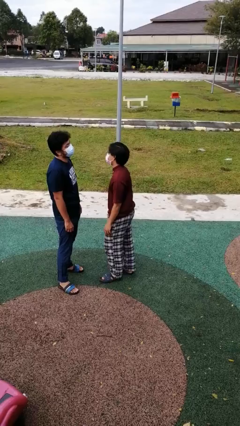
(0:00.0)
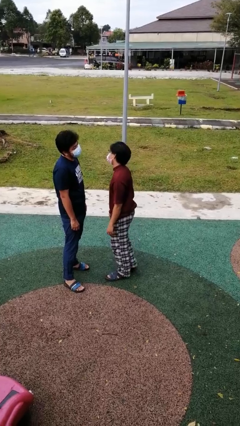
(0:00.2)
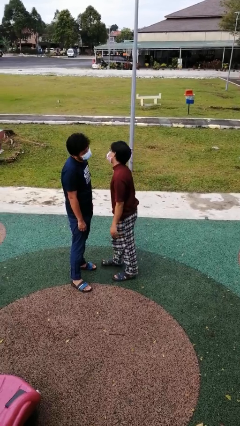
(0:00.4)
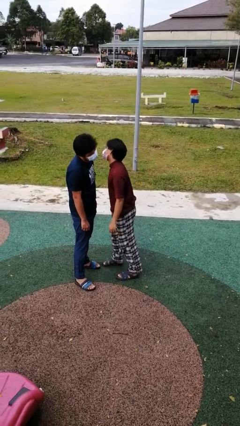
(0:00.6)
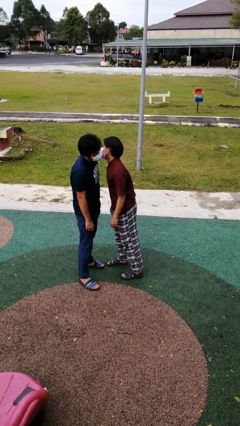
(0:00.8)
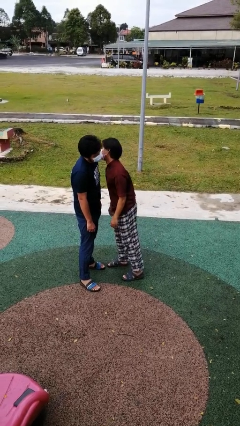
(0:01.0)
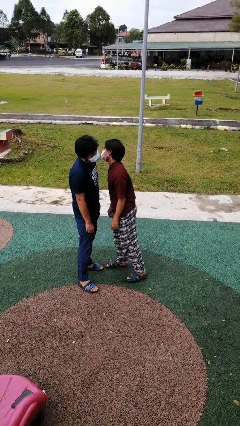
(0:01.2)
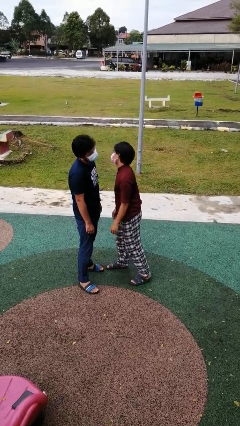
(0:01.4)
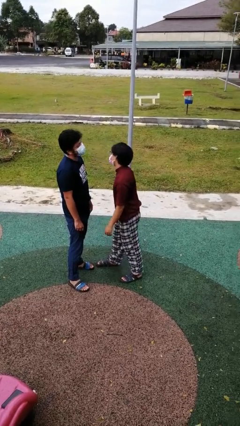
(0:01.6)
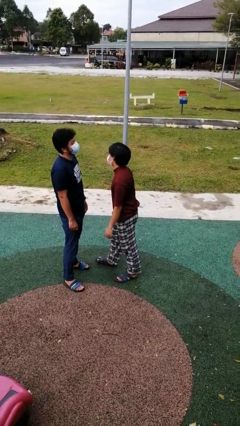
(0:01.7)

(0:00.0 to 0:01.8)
person kisses cheek of person

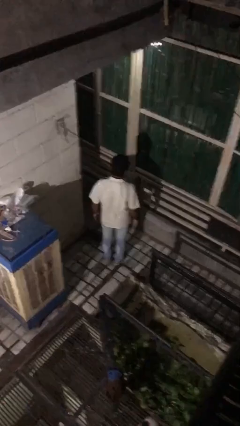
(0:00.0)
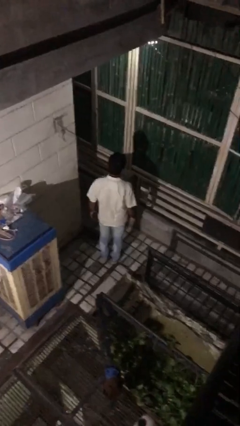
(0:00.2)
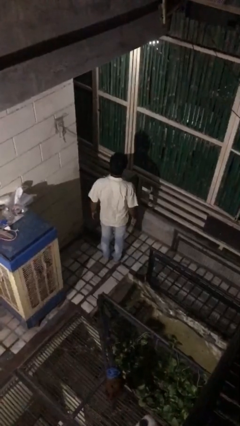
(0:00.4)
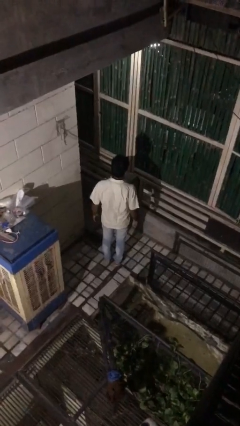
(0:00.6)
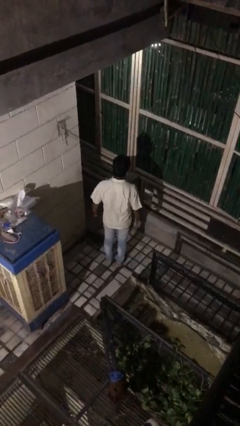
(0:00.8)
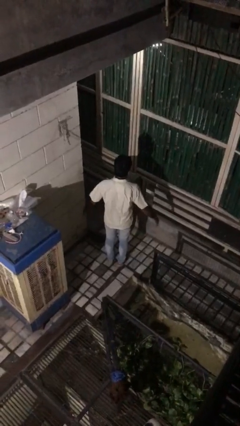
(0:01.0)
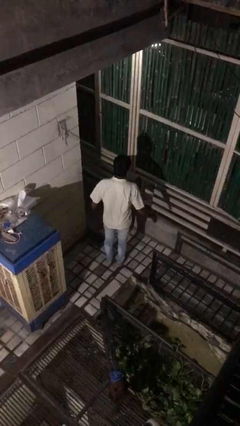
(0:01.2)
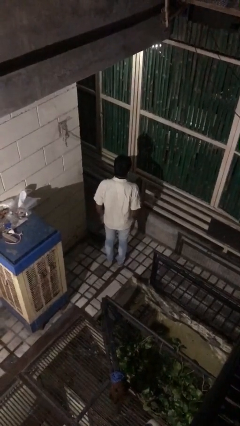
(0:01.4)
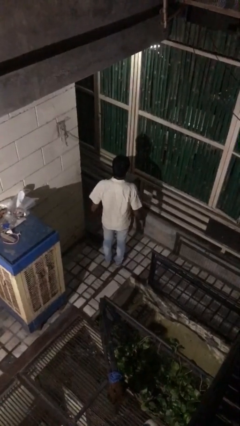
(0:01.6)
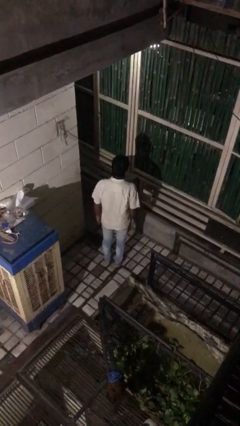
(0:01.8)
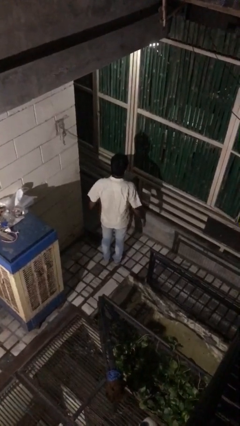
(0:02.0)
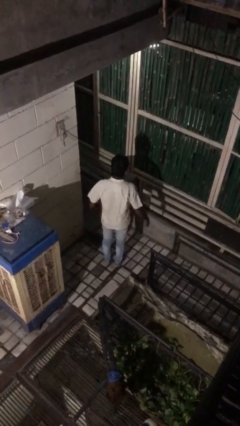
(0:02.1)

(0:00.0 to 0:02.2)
person slaps hands on thighs

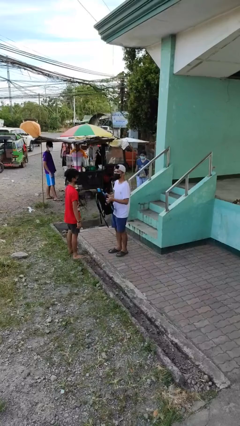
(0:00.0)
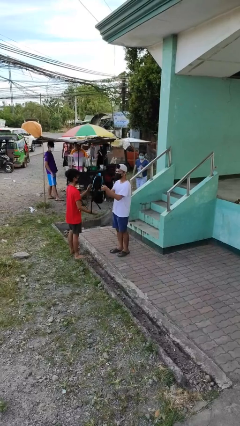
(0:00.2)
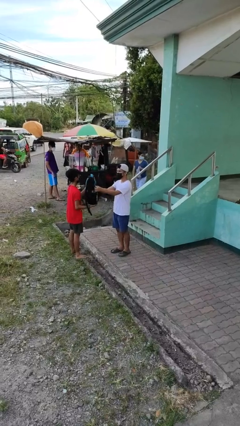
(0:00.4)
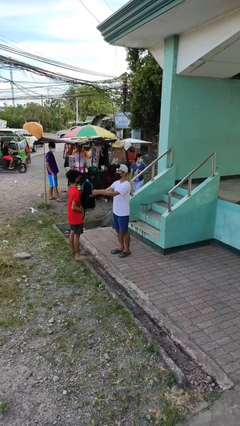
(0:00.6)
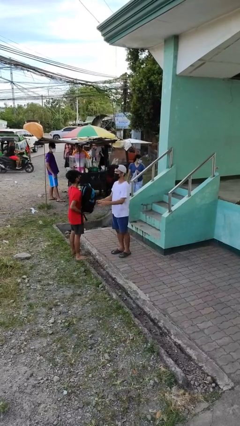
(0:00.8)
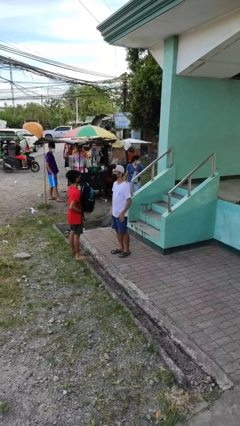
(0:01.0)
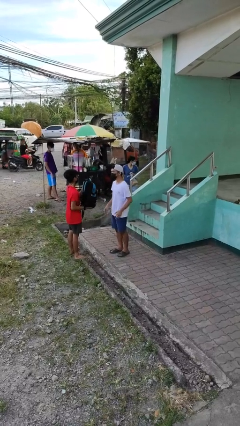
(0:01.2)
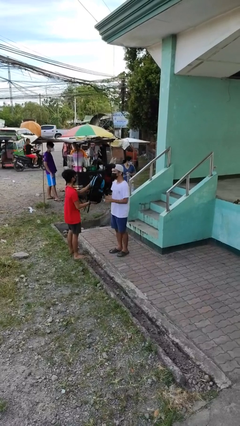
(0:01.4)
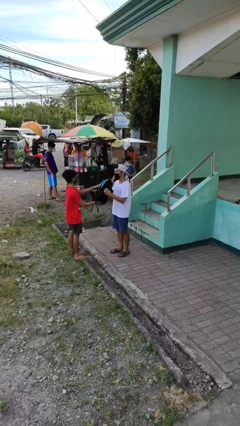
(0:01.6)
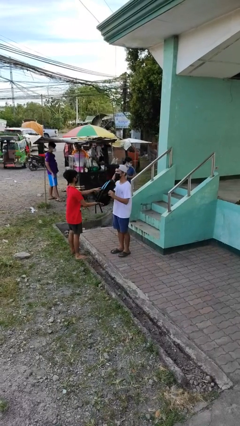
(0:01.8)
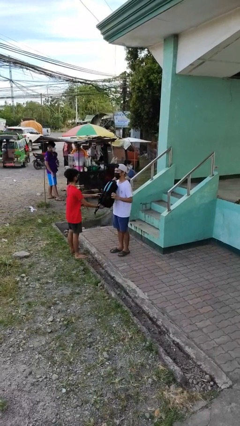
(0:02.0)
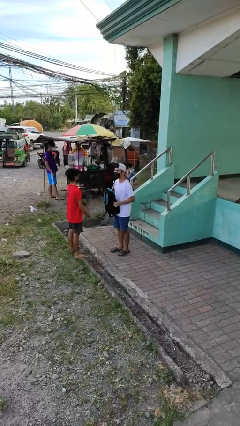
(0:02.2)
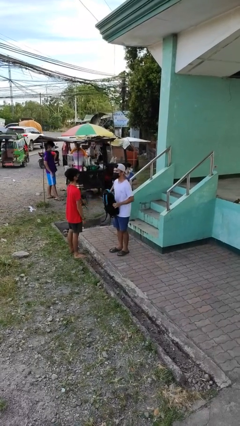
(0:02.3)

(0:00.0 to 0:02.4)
person transfers object to person

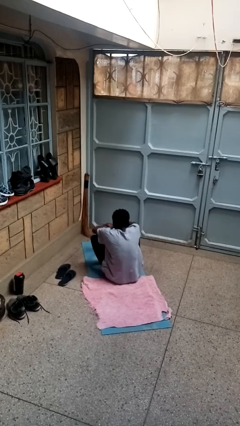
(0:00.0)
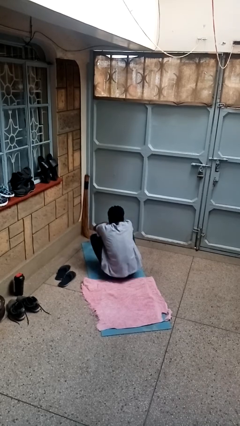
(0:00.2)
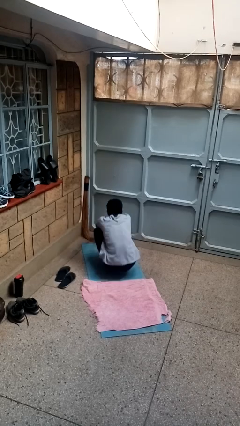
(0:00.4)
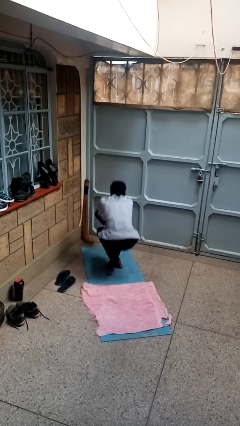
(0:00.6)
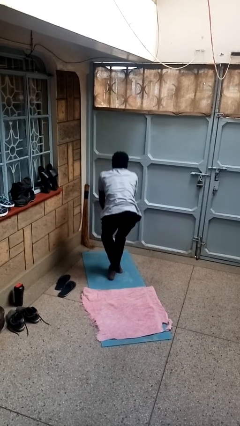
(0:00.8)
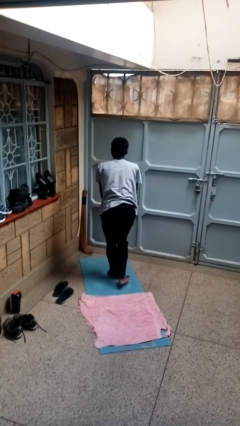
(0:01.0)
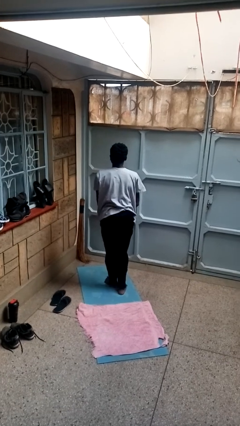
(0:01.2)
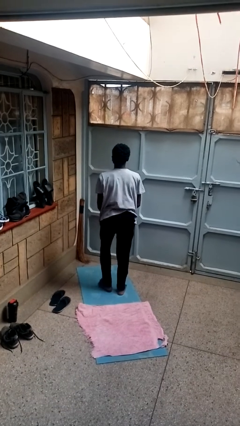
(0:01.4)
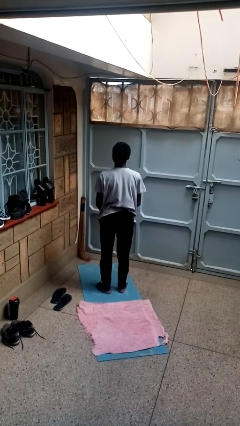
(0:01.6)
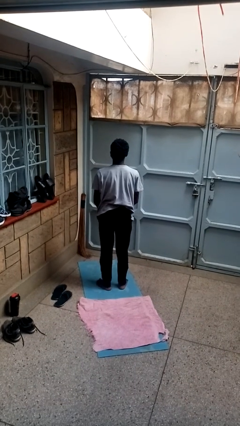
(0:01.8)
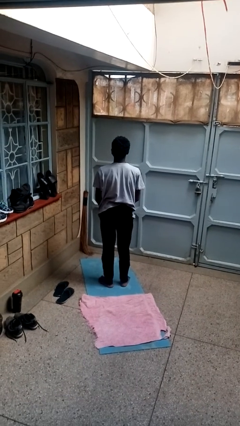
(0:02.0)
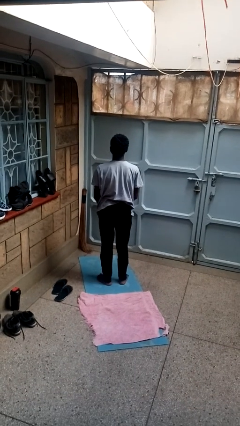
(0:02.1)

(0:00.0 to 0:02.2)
person stands up from floor

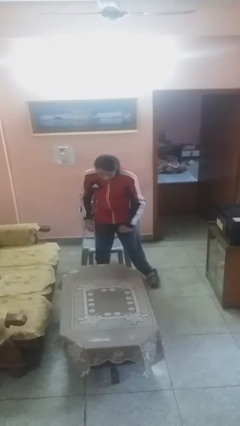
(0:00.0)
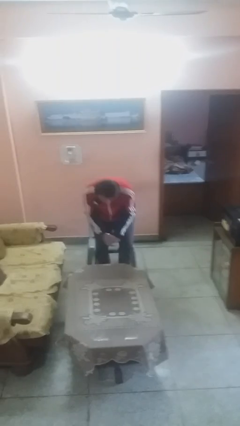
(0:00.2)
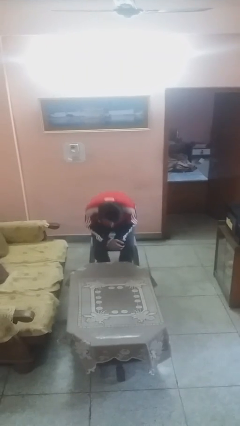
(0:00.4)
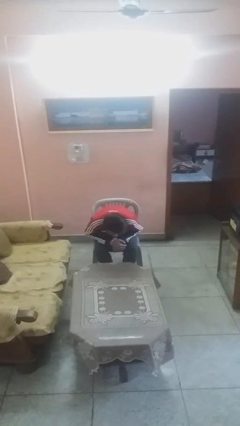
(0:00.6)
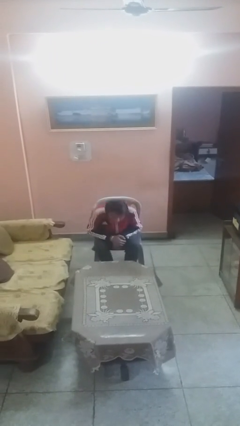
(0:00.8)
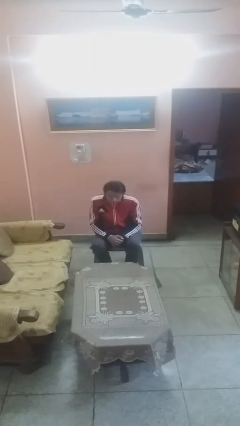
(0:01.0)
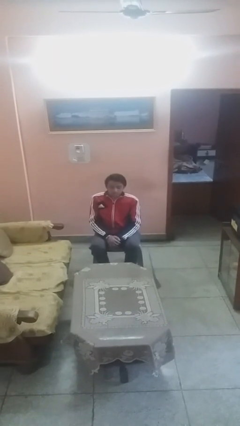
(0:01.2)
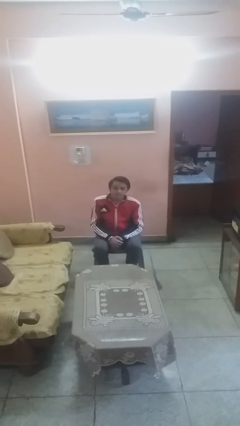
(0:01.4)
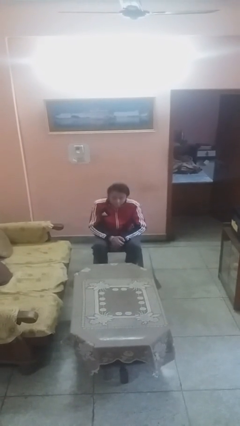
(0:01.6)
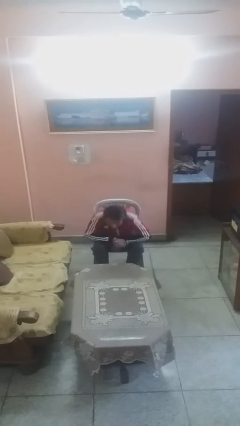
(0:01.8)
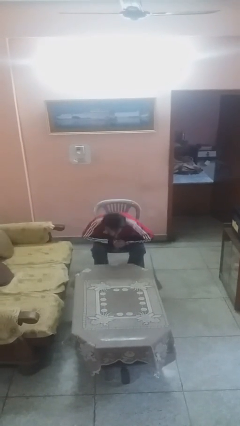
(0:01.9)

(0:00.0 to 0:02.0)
person sits down

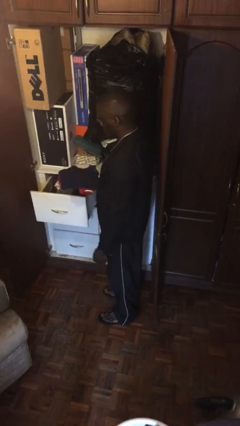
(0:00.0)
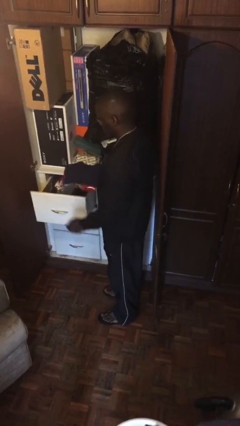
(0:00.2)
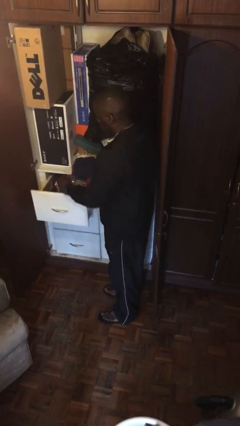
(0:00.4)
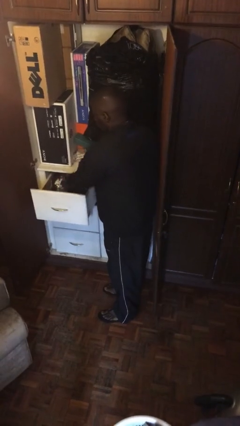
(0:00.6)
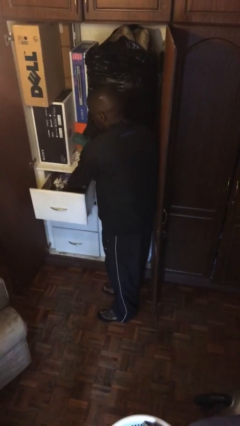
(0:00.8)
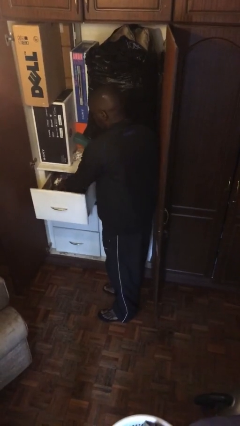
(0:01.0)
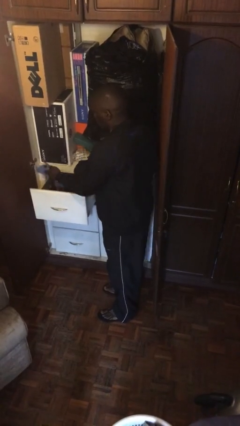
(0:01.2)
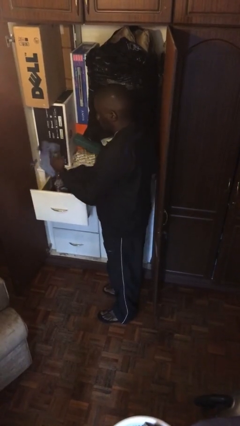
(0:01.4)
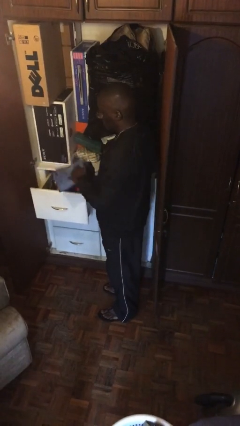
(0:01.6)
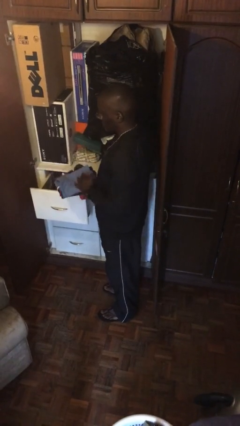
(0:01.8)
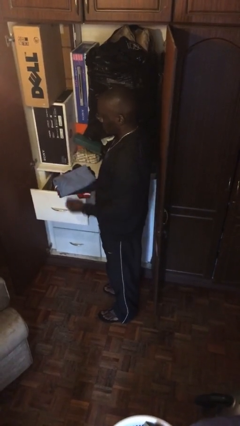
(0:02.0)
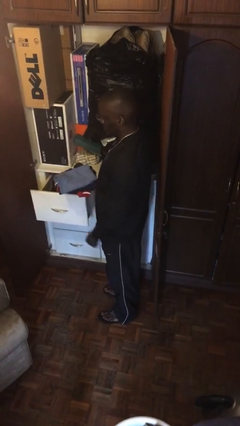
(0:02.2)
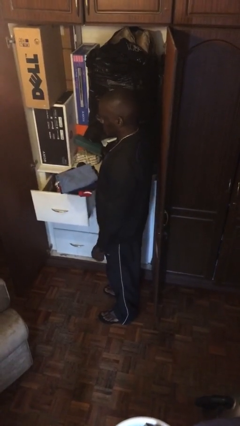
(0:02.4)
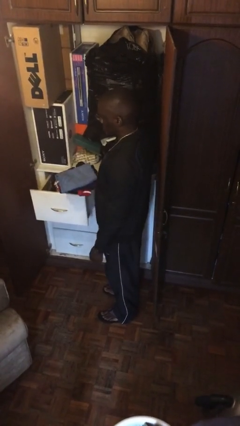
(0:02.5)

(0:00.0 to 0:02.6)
person takes clothes from dresser

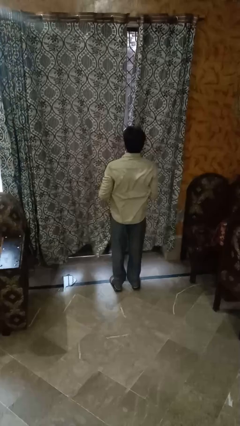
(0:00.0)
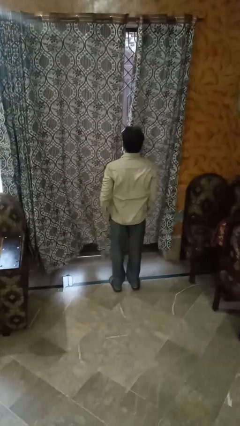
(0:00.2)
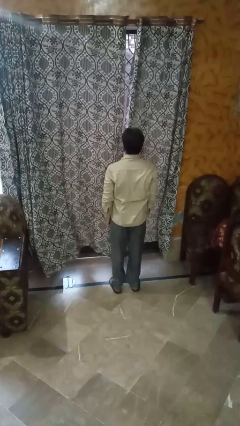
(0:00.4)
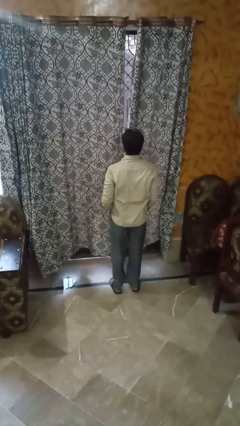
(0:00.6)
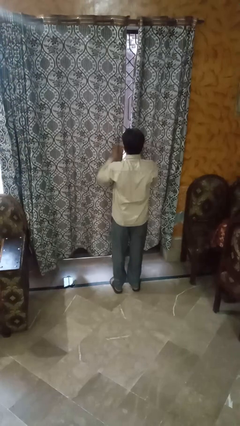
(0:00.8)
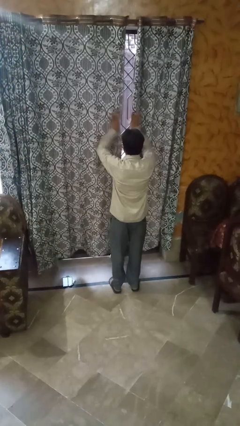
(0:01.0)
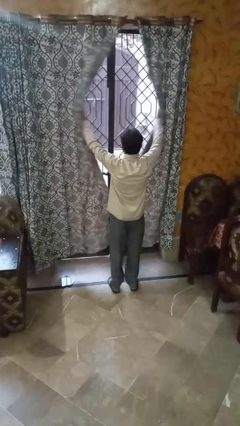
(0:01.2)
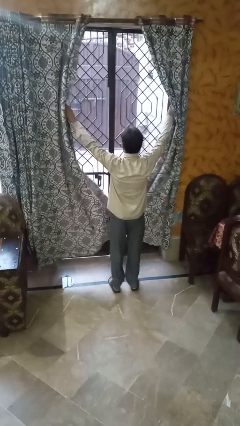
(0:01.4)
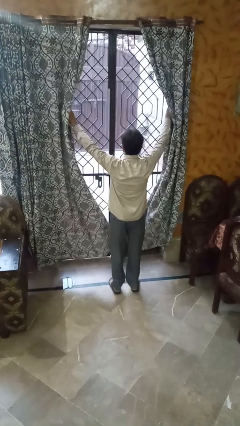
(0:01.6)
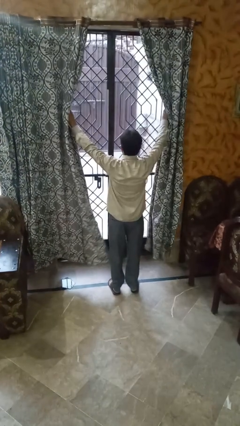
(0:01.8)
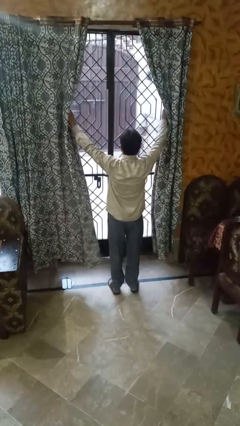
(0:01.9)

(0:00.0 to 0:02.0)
person opens curtains

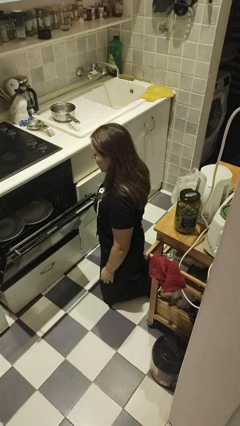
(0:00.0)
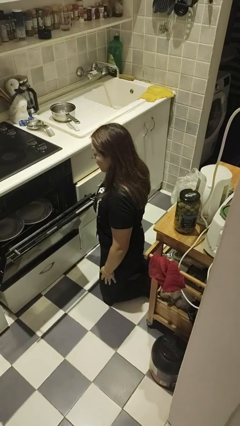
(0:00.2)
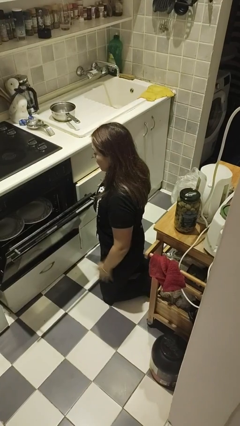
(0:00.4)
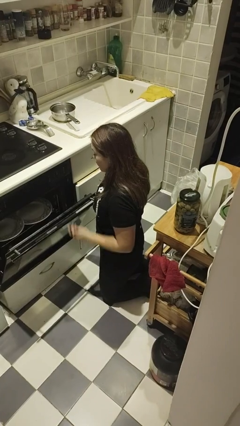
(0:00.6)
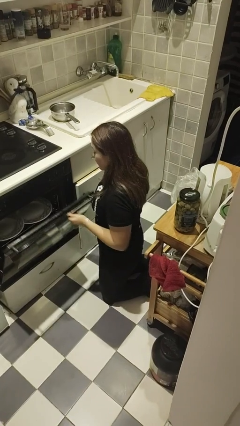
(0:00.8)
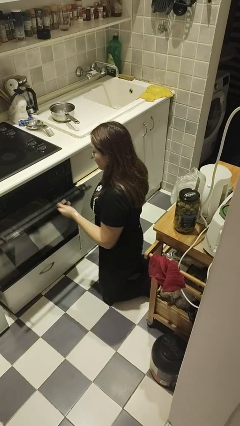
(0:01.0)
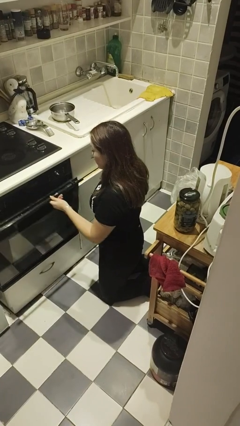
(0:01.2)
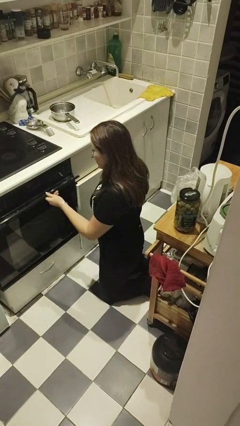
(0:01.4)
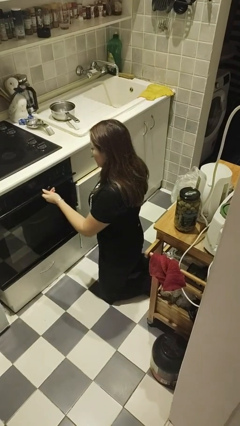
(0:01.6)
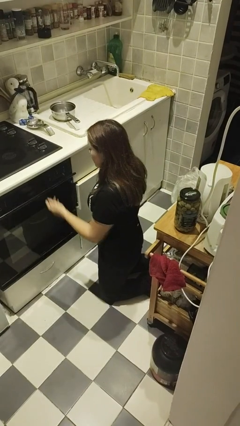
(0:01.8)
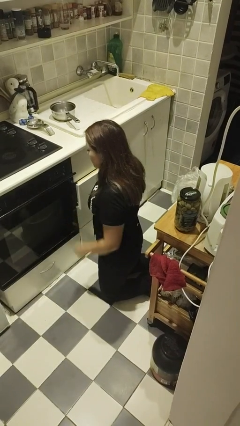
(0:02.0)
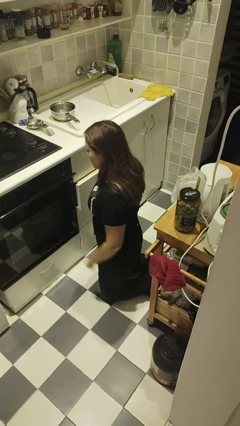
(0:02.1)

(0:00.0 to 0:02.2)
person closes oven door
